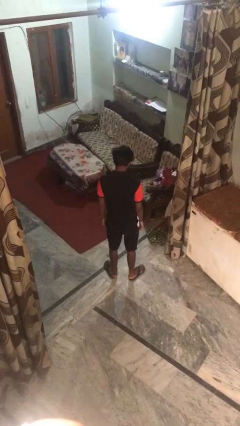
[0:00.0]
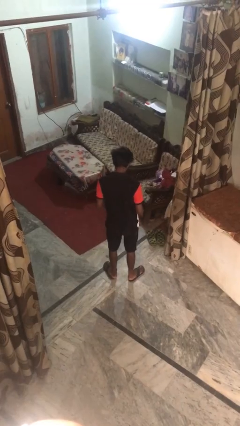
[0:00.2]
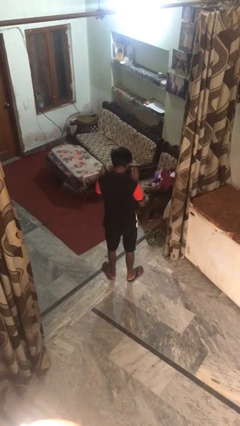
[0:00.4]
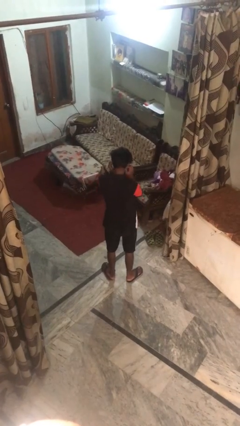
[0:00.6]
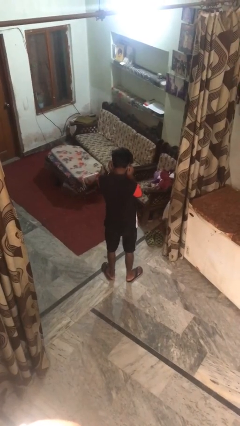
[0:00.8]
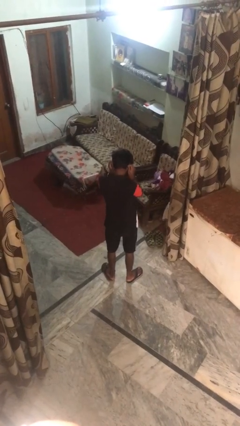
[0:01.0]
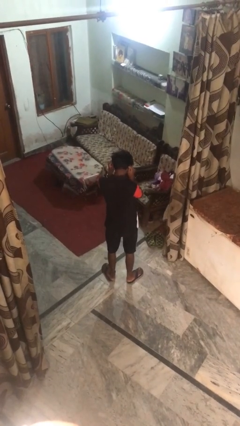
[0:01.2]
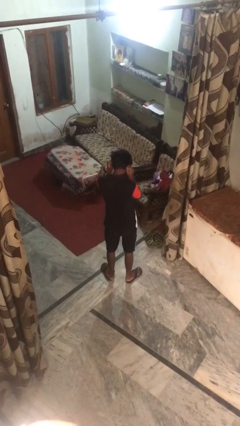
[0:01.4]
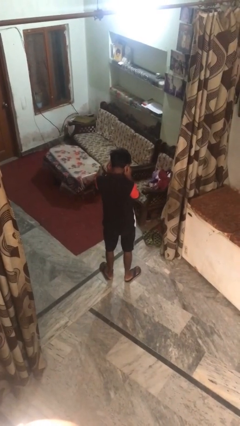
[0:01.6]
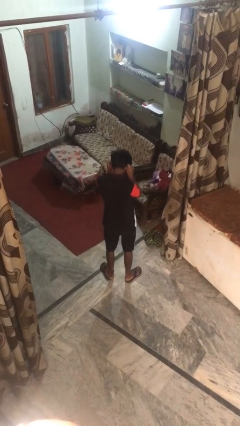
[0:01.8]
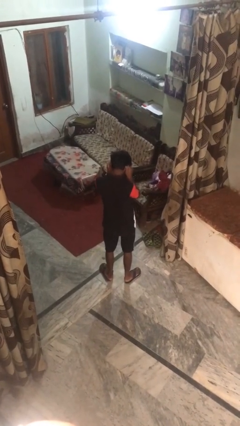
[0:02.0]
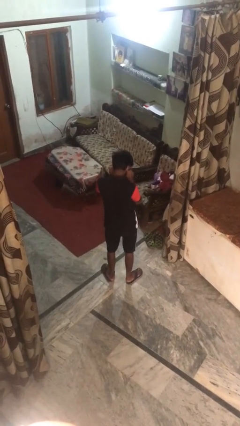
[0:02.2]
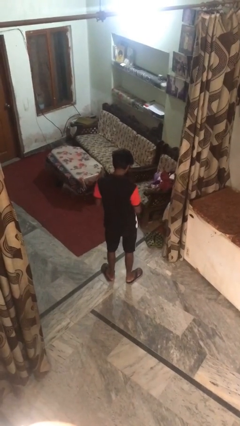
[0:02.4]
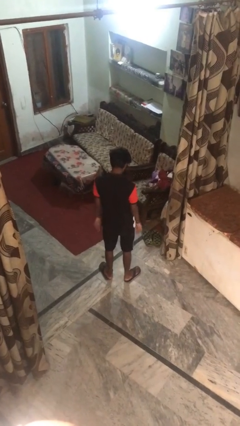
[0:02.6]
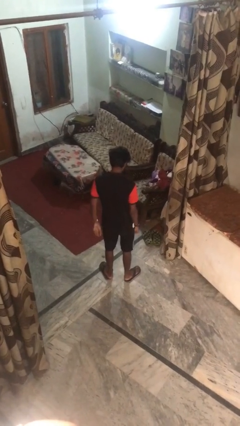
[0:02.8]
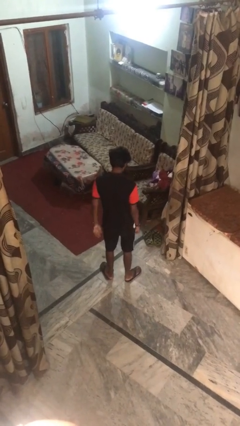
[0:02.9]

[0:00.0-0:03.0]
person touches earlobe

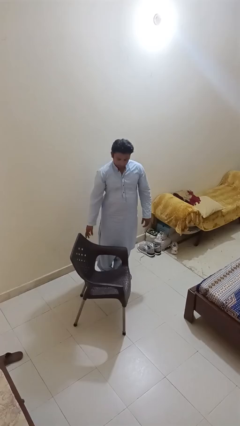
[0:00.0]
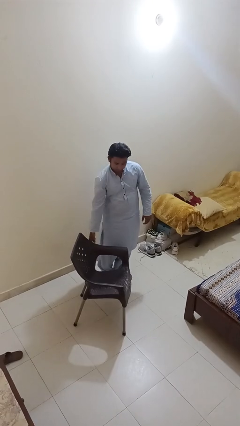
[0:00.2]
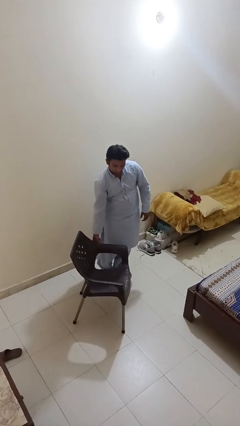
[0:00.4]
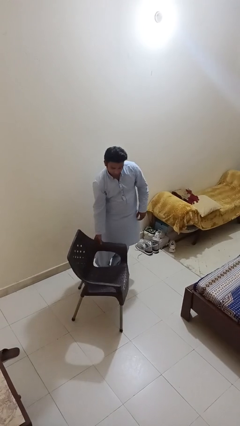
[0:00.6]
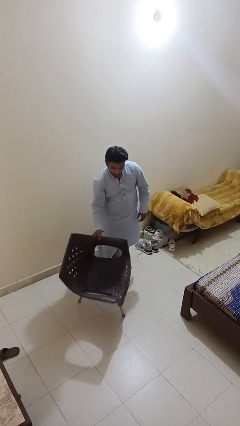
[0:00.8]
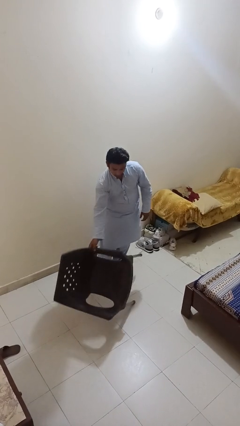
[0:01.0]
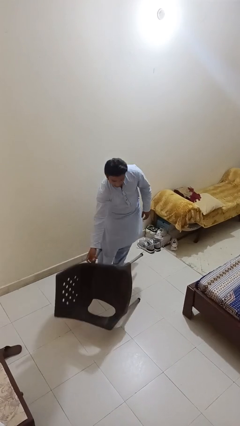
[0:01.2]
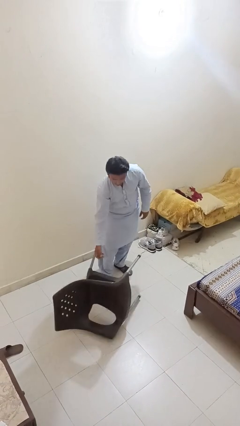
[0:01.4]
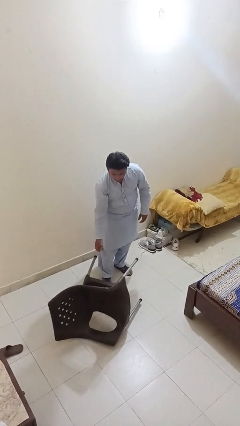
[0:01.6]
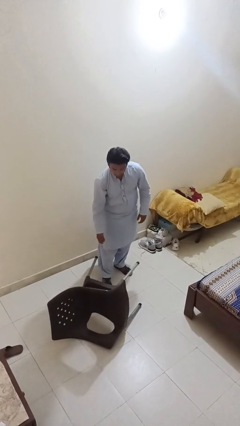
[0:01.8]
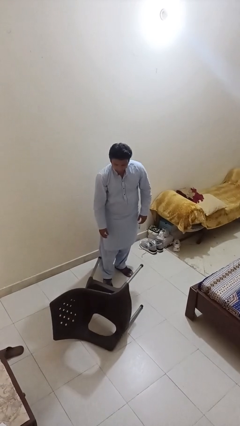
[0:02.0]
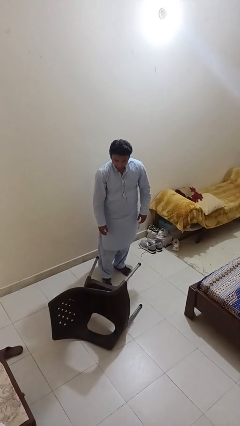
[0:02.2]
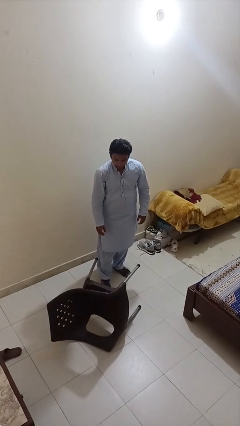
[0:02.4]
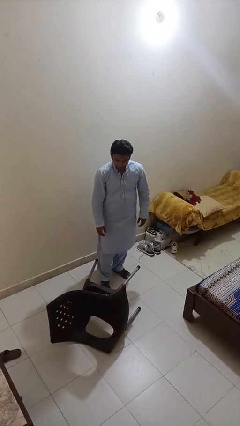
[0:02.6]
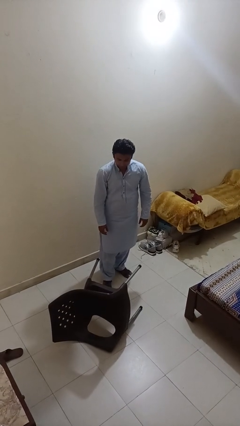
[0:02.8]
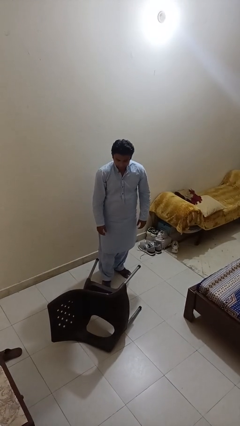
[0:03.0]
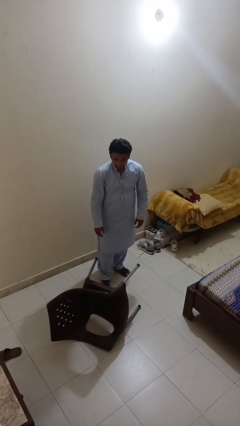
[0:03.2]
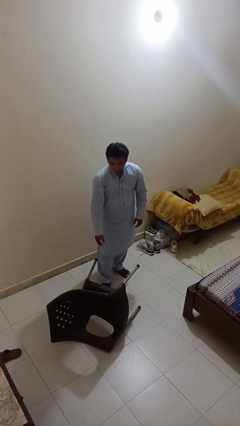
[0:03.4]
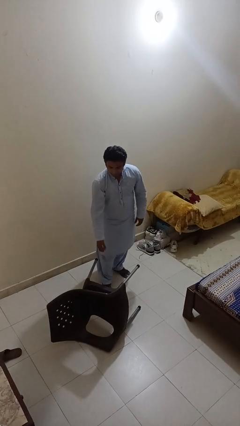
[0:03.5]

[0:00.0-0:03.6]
person knocks over furniture

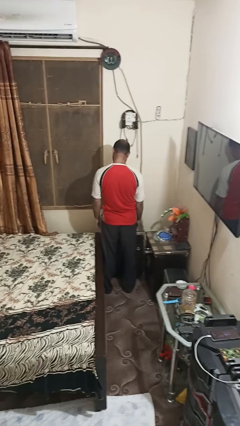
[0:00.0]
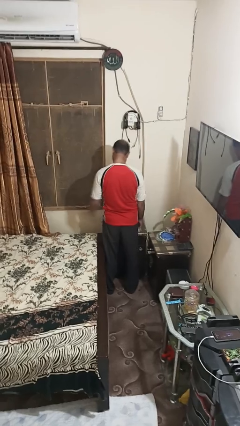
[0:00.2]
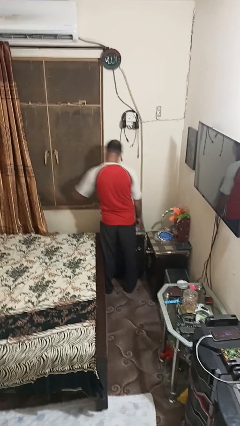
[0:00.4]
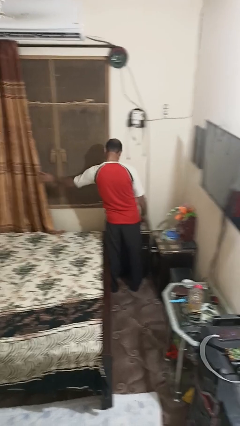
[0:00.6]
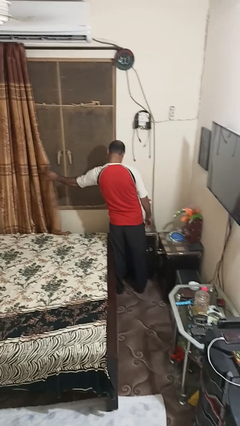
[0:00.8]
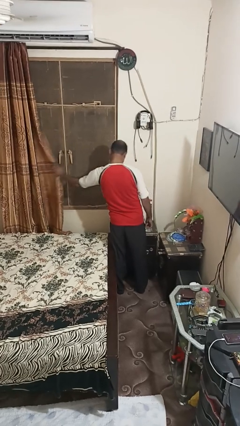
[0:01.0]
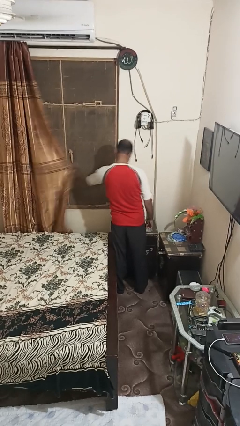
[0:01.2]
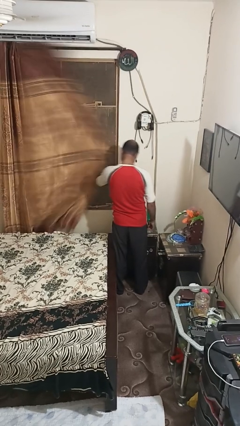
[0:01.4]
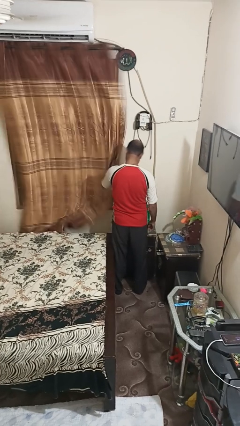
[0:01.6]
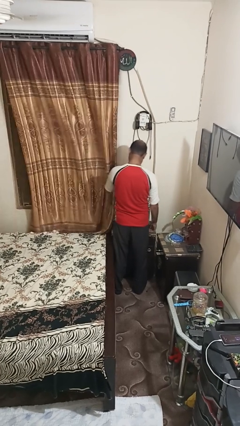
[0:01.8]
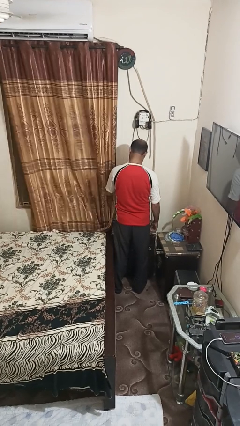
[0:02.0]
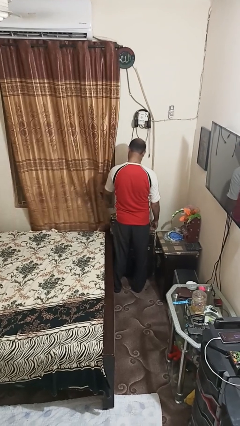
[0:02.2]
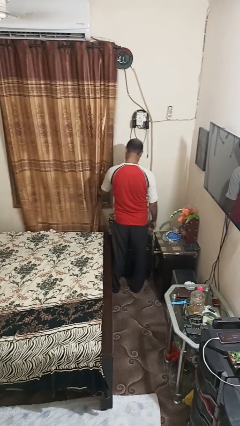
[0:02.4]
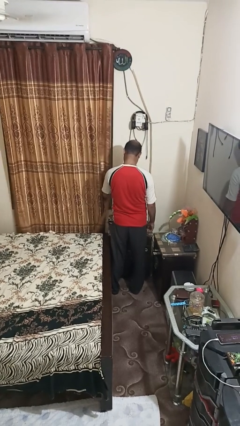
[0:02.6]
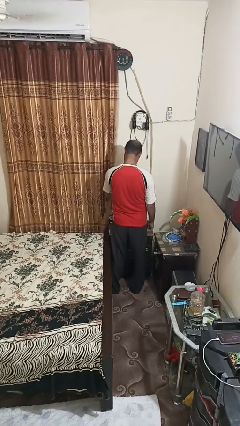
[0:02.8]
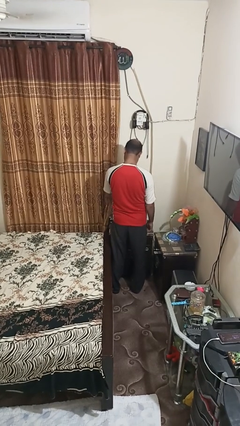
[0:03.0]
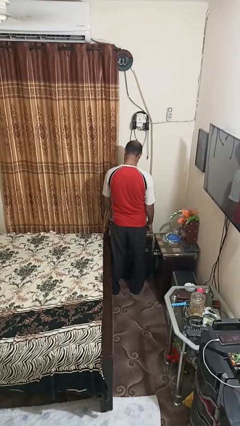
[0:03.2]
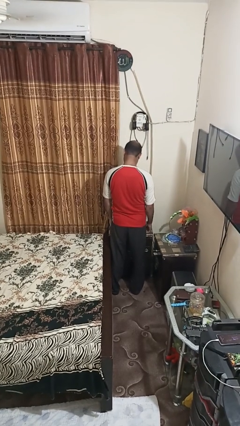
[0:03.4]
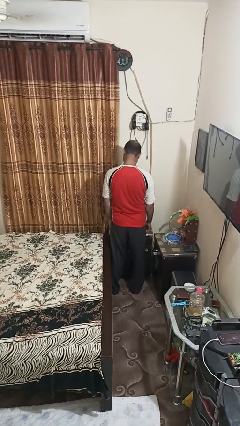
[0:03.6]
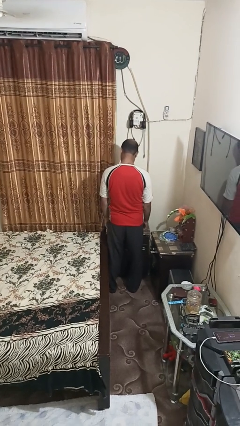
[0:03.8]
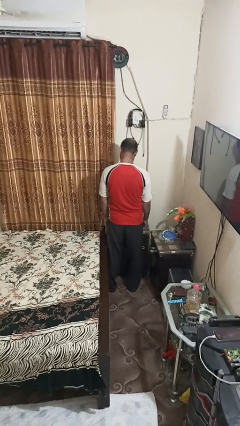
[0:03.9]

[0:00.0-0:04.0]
person closes curtains

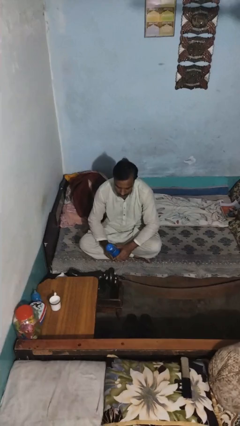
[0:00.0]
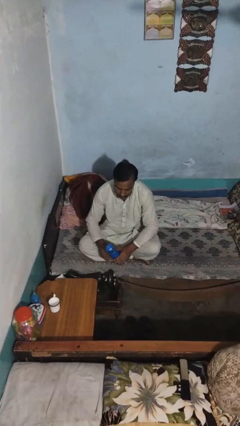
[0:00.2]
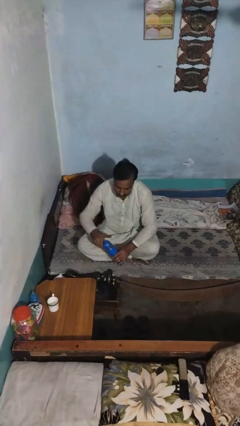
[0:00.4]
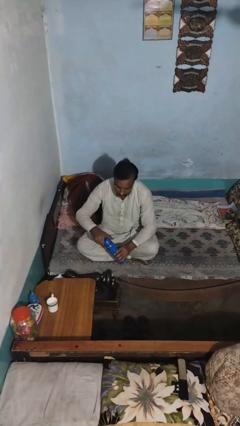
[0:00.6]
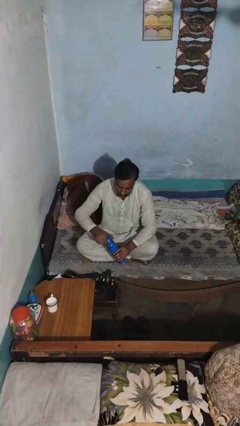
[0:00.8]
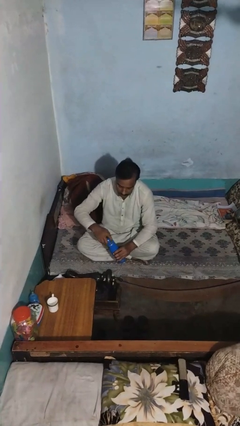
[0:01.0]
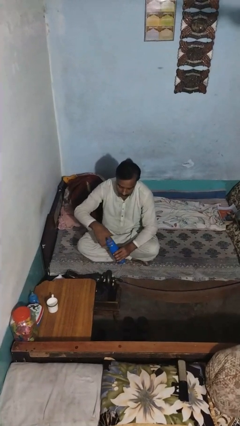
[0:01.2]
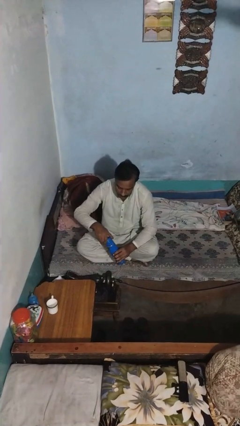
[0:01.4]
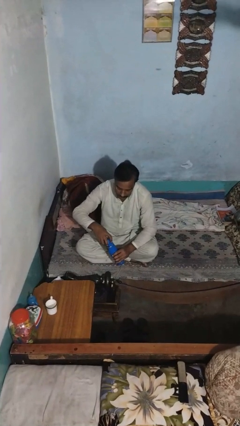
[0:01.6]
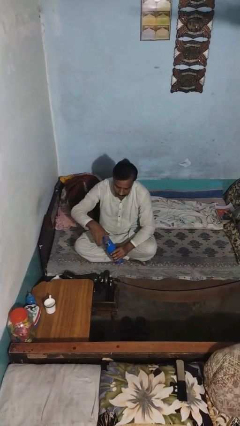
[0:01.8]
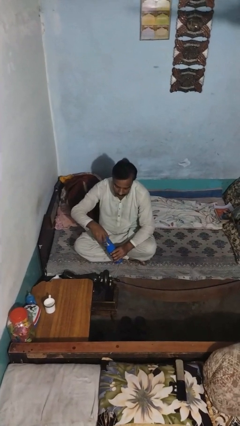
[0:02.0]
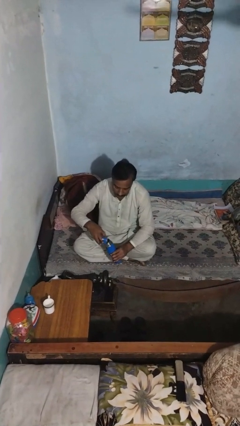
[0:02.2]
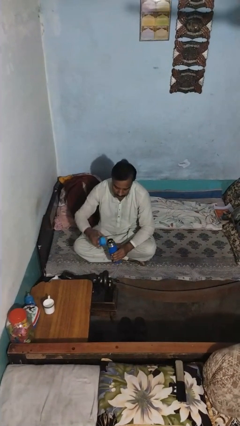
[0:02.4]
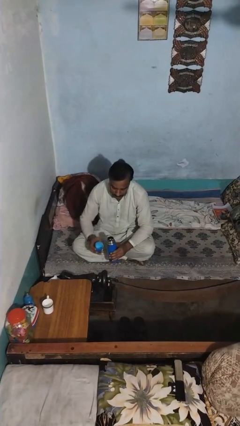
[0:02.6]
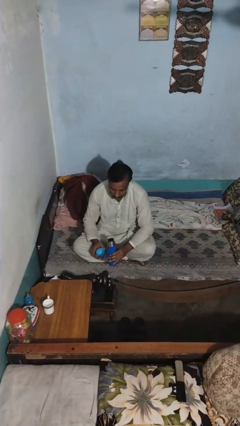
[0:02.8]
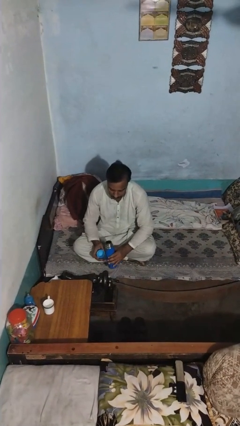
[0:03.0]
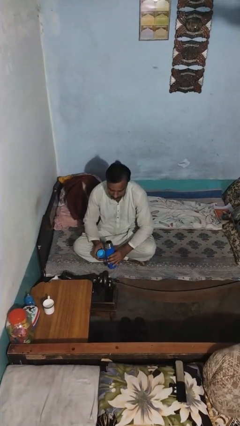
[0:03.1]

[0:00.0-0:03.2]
person unscrews lid from bottle

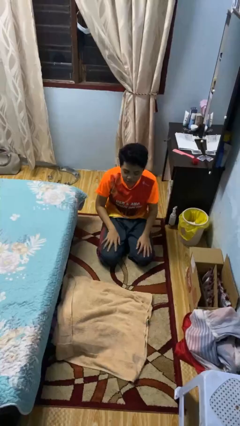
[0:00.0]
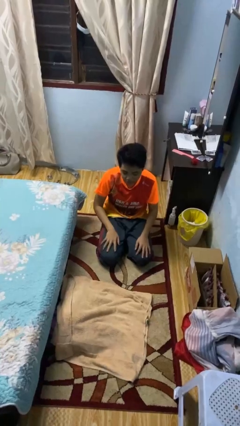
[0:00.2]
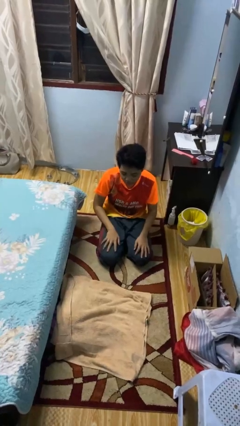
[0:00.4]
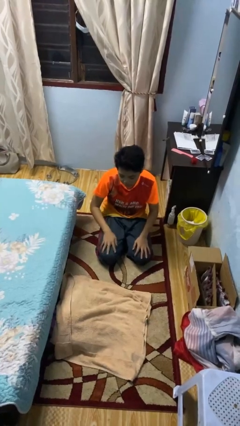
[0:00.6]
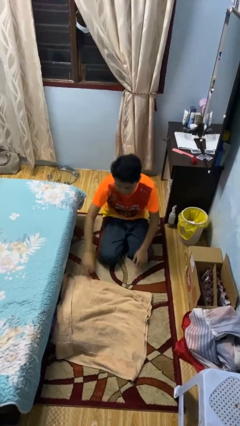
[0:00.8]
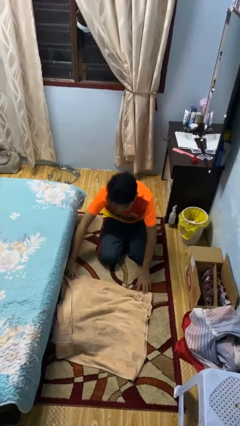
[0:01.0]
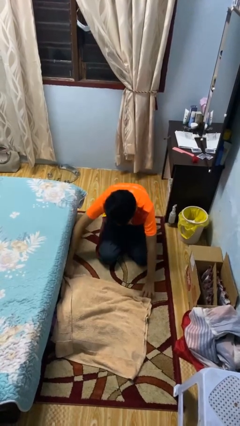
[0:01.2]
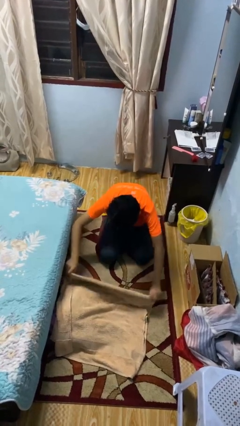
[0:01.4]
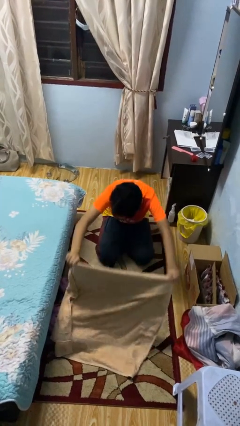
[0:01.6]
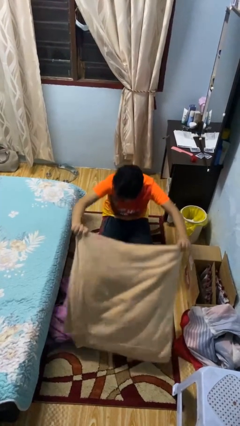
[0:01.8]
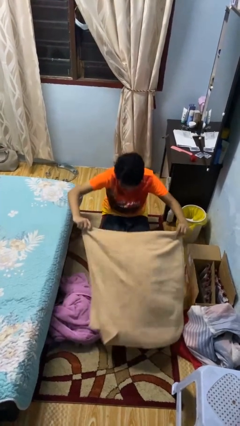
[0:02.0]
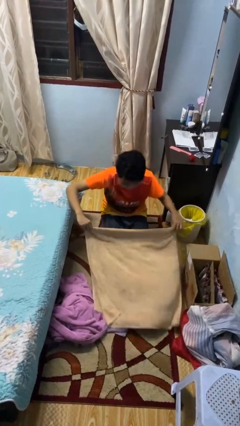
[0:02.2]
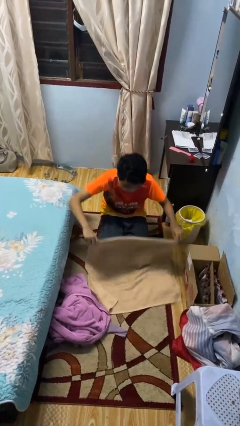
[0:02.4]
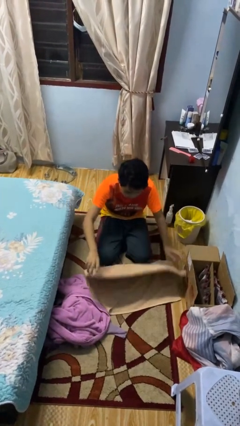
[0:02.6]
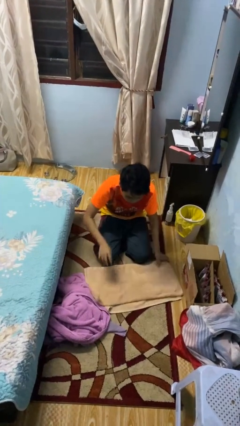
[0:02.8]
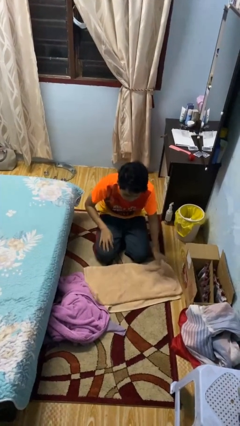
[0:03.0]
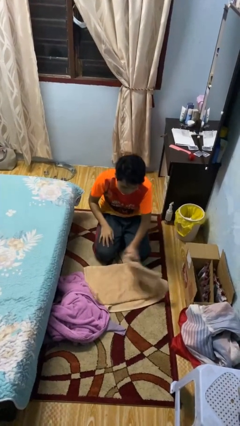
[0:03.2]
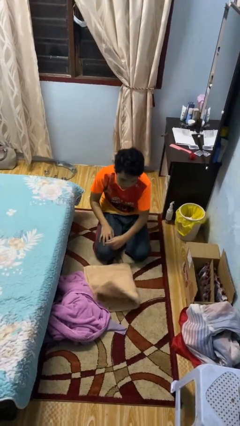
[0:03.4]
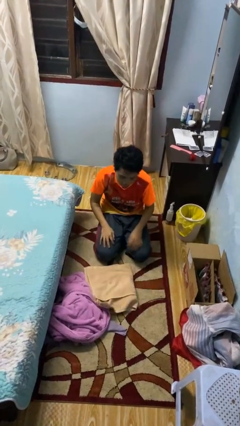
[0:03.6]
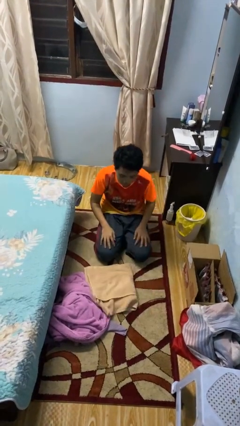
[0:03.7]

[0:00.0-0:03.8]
person folds towel

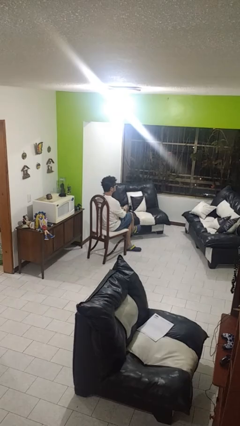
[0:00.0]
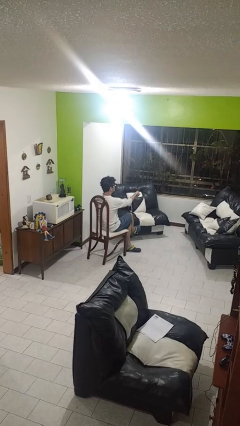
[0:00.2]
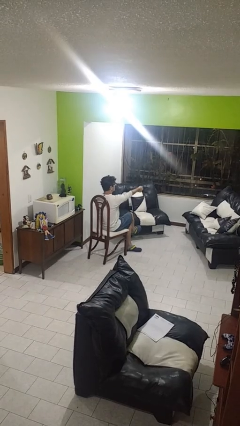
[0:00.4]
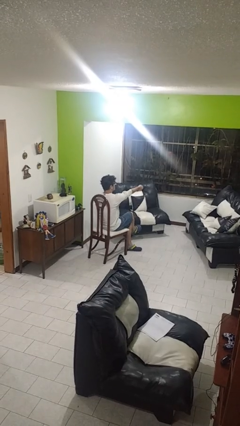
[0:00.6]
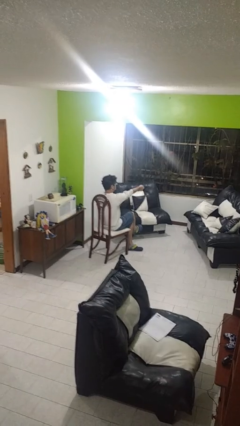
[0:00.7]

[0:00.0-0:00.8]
person uses television remote
